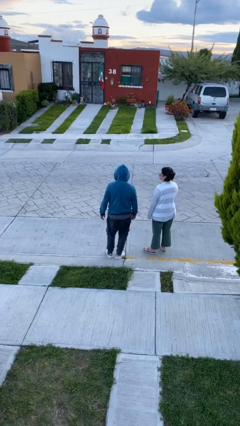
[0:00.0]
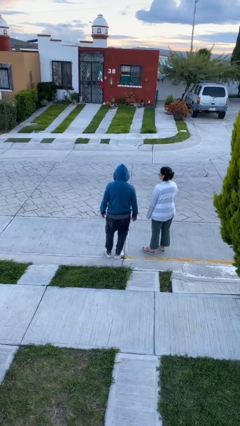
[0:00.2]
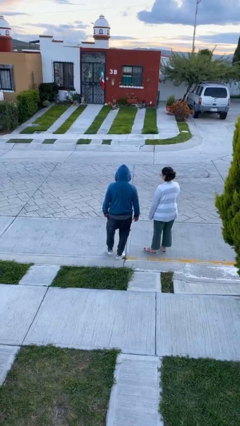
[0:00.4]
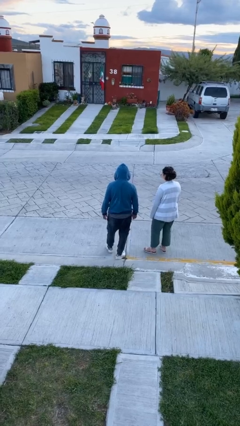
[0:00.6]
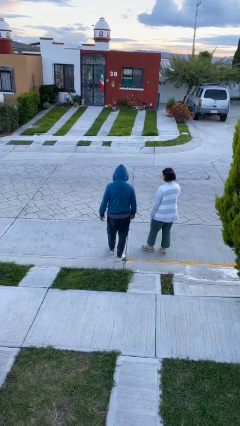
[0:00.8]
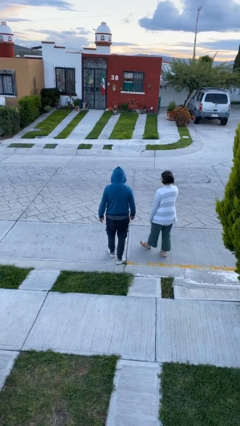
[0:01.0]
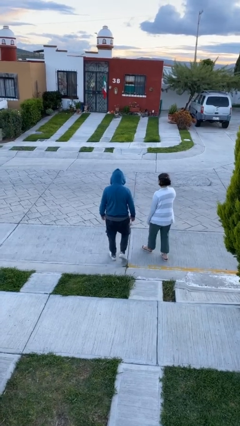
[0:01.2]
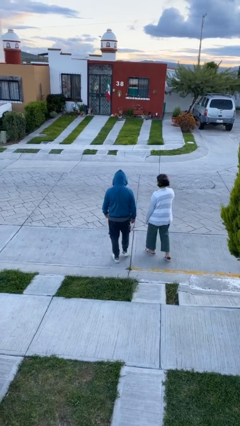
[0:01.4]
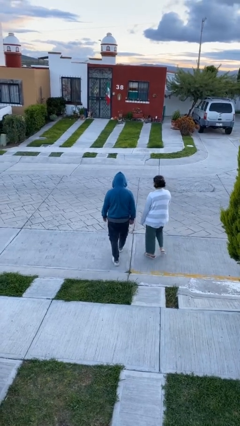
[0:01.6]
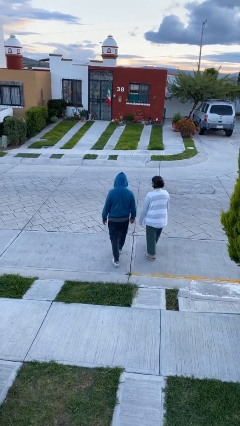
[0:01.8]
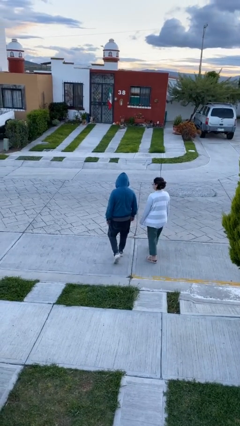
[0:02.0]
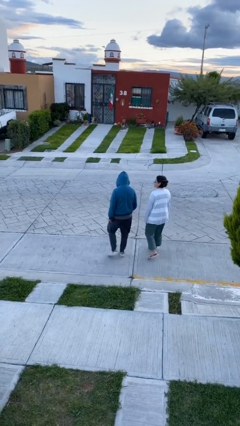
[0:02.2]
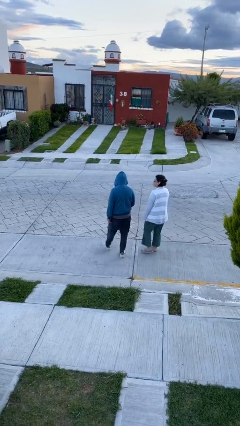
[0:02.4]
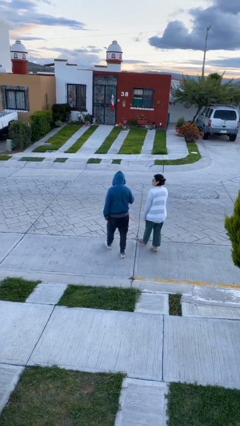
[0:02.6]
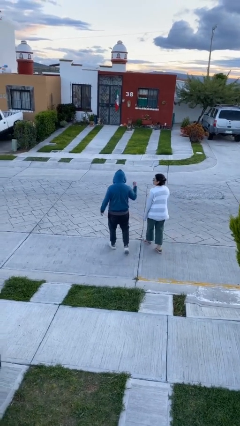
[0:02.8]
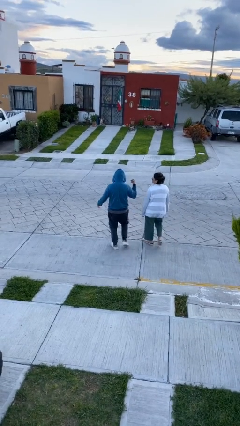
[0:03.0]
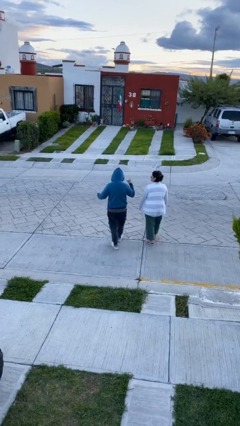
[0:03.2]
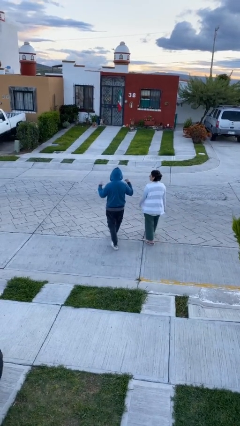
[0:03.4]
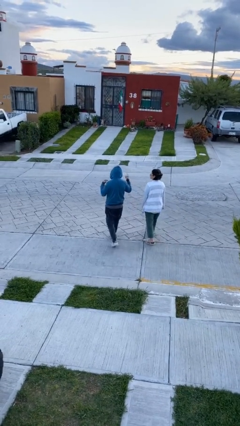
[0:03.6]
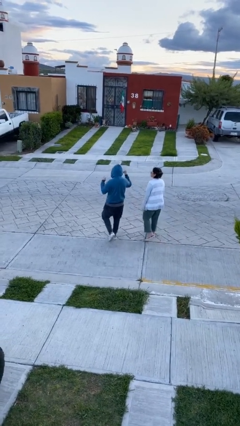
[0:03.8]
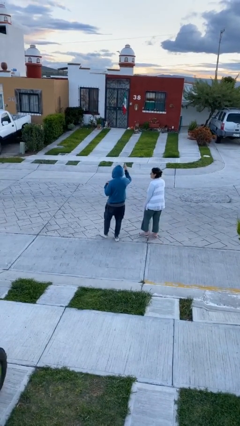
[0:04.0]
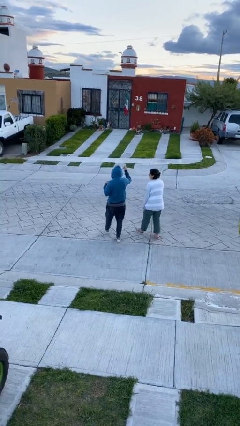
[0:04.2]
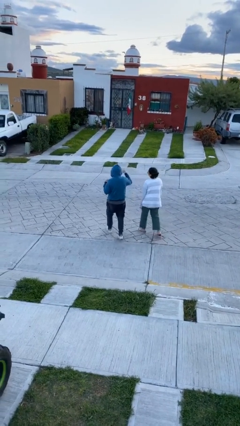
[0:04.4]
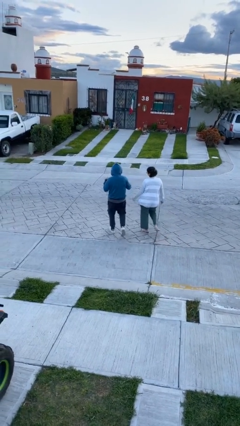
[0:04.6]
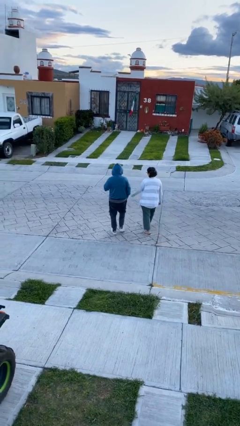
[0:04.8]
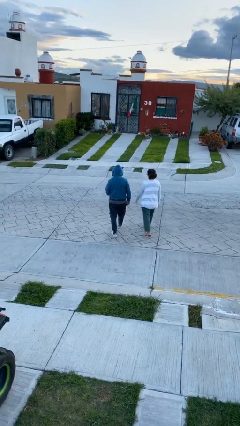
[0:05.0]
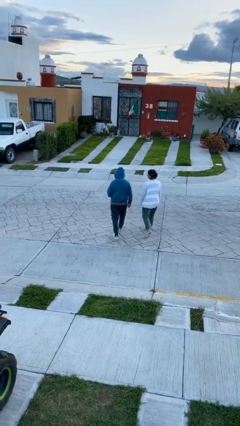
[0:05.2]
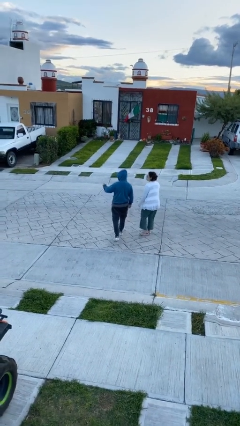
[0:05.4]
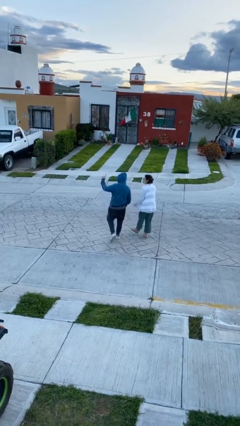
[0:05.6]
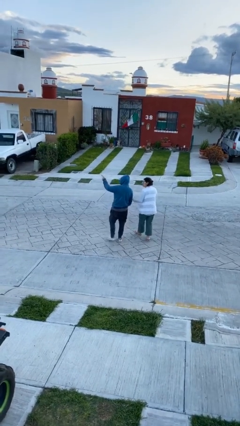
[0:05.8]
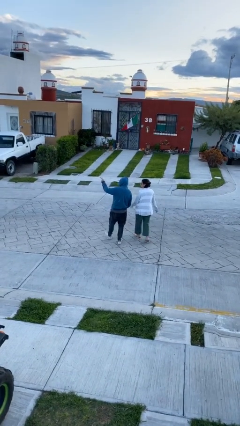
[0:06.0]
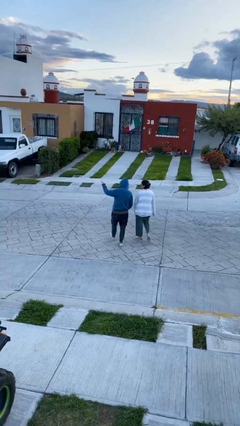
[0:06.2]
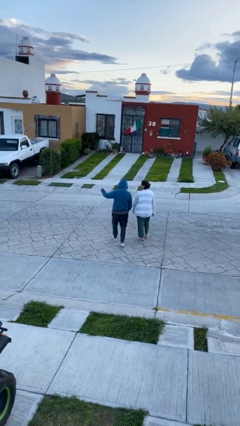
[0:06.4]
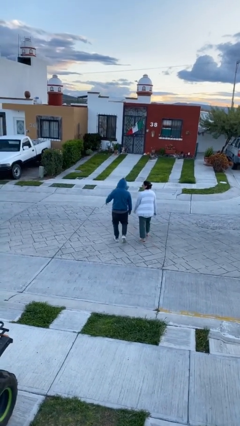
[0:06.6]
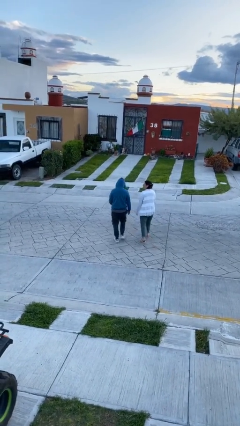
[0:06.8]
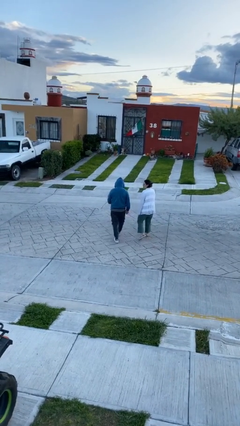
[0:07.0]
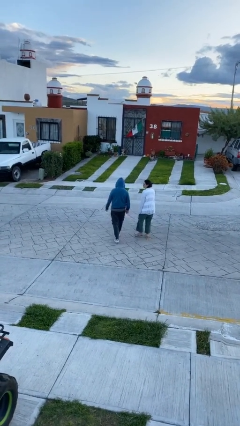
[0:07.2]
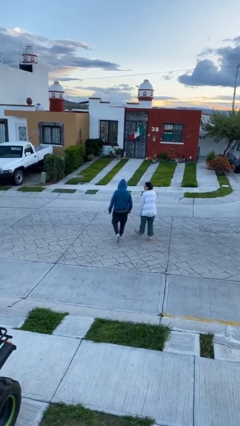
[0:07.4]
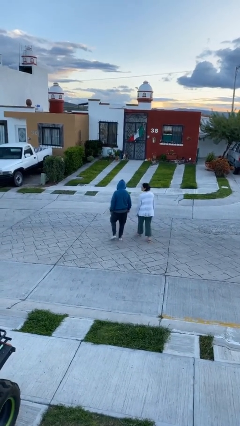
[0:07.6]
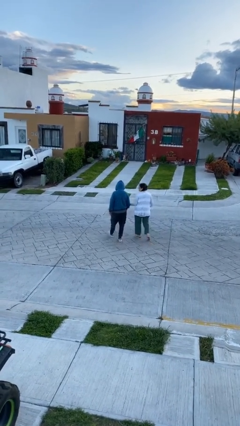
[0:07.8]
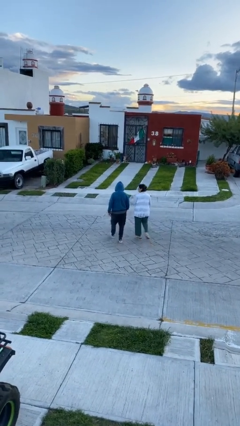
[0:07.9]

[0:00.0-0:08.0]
person talks to person

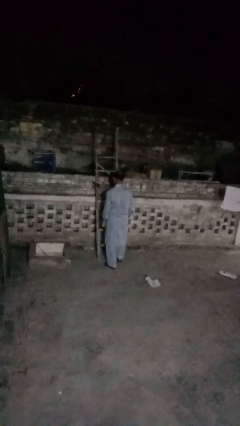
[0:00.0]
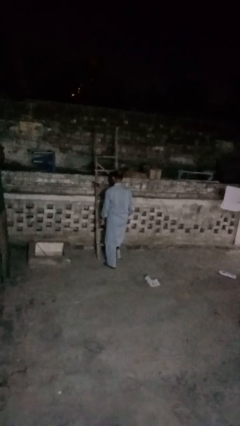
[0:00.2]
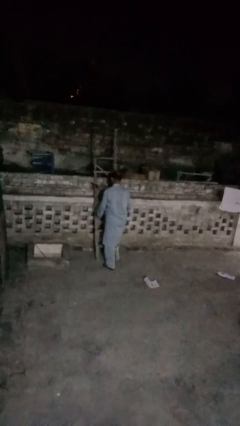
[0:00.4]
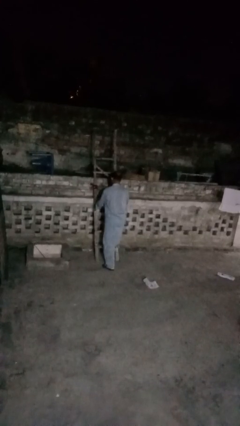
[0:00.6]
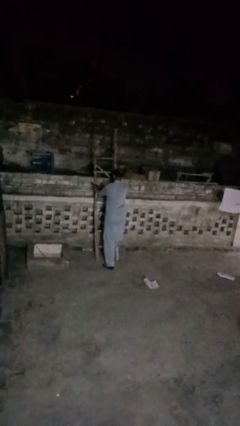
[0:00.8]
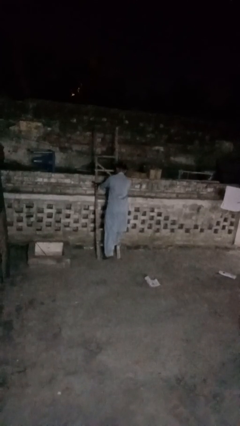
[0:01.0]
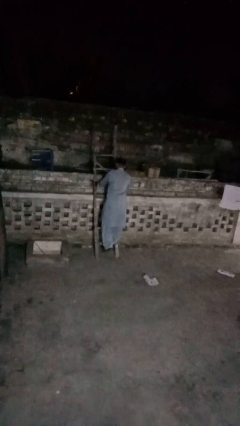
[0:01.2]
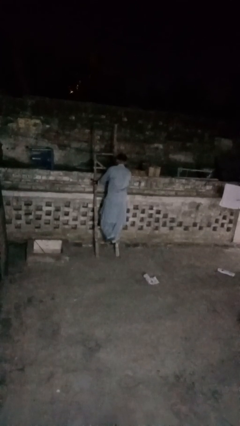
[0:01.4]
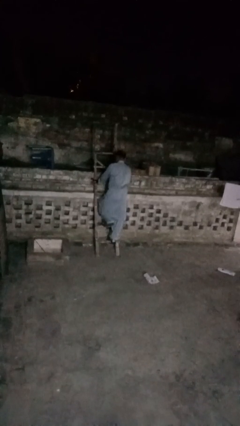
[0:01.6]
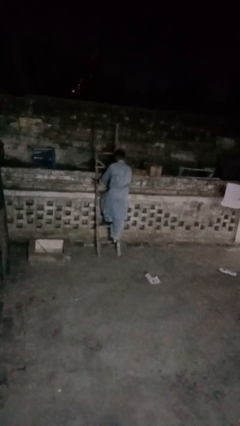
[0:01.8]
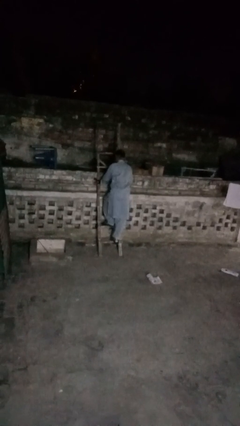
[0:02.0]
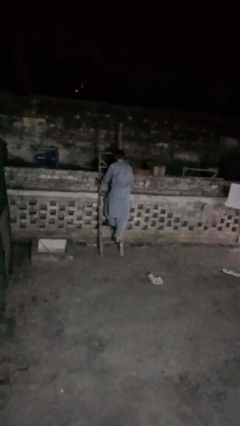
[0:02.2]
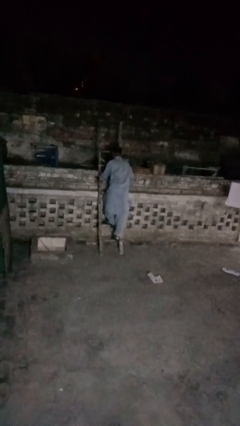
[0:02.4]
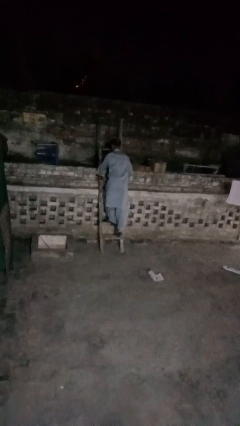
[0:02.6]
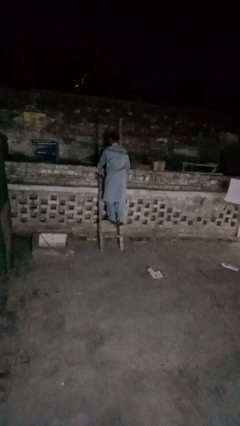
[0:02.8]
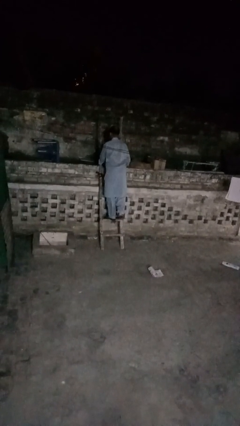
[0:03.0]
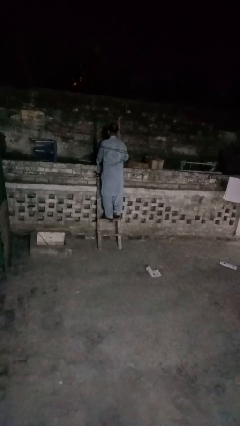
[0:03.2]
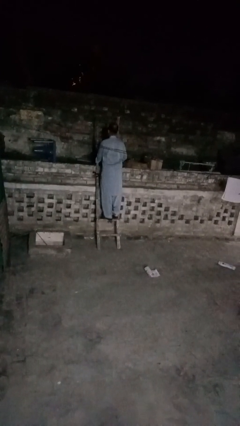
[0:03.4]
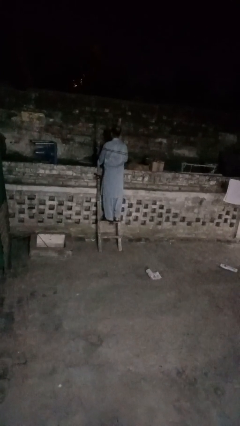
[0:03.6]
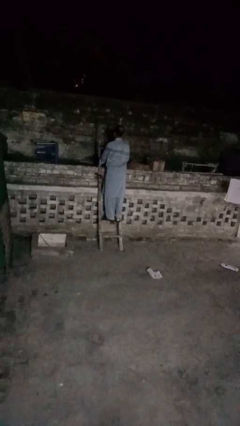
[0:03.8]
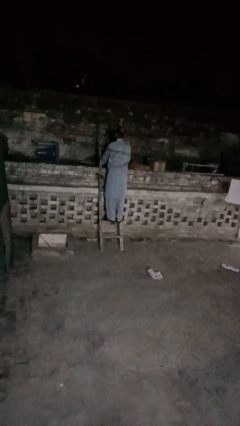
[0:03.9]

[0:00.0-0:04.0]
person climbs up ladder

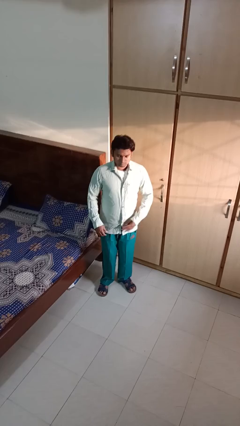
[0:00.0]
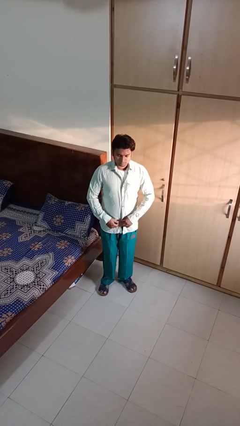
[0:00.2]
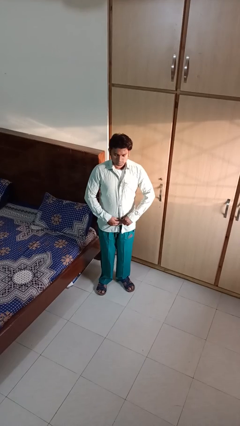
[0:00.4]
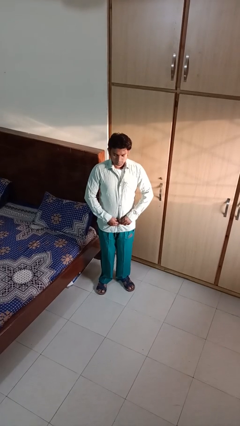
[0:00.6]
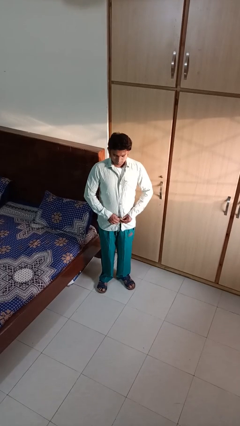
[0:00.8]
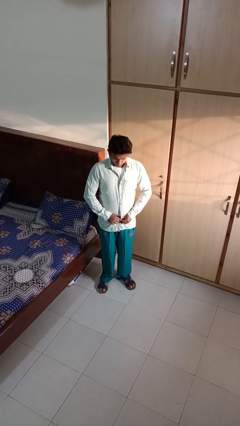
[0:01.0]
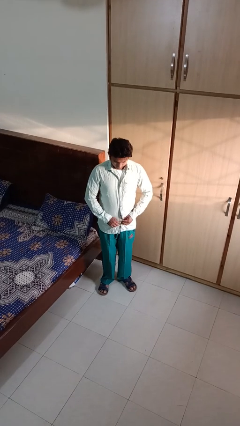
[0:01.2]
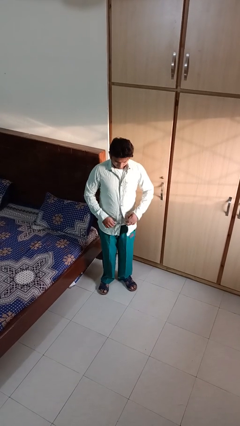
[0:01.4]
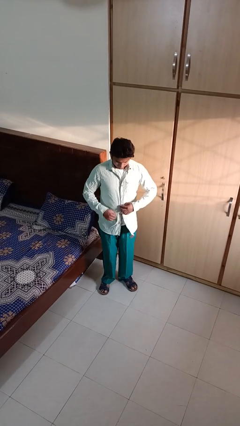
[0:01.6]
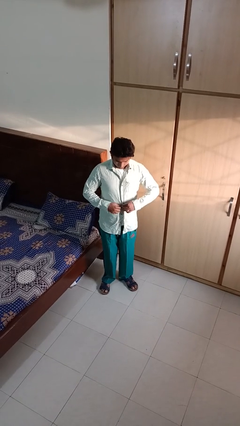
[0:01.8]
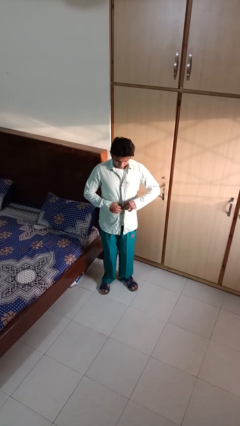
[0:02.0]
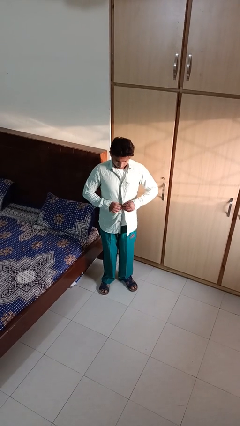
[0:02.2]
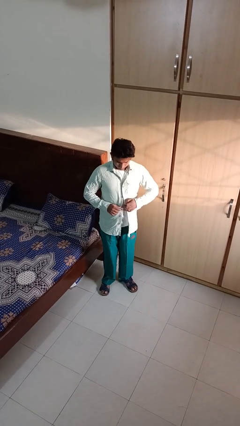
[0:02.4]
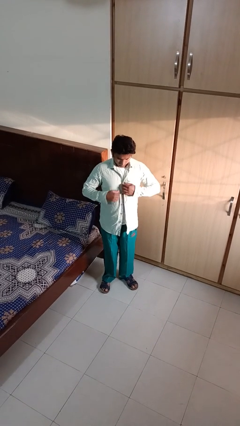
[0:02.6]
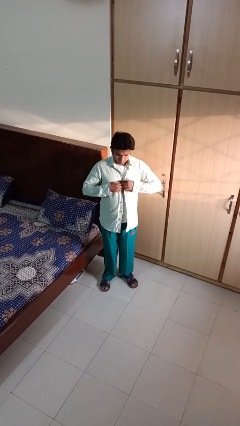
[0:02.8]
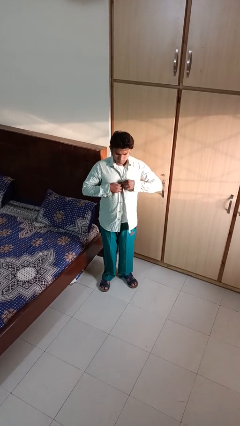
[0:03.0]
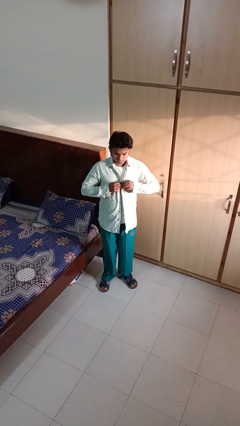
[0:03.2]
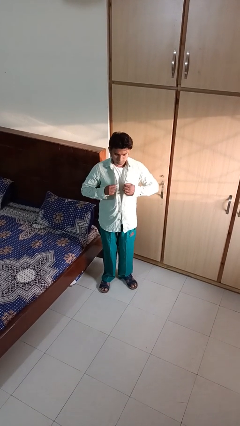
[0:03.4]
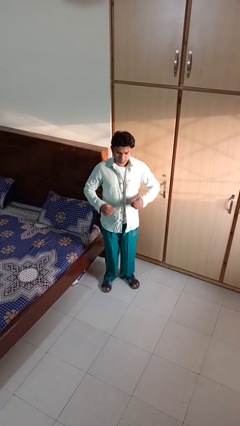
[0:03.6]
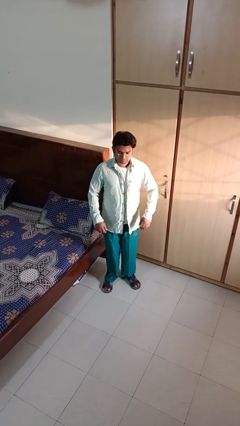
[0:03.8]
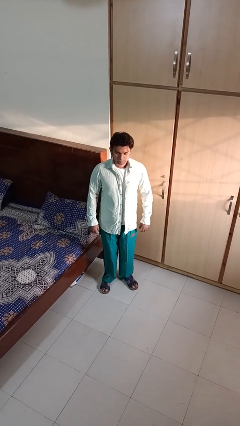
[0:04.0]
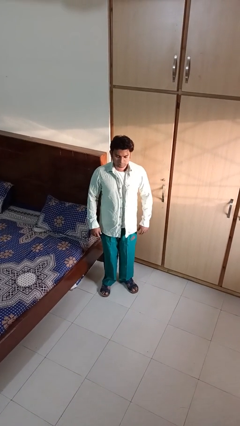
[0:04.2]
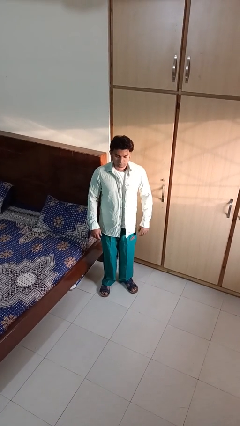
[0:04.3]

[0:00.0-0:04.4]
person unbuttons shirt

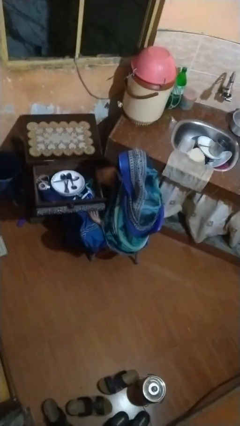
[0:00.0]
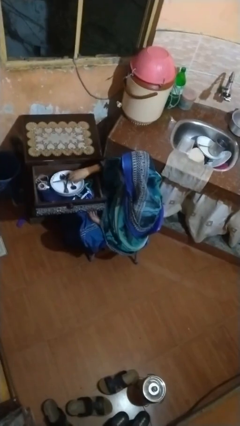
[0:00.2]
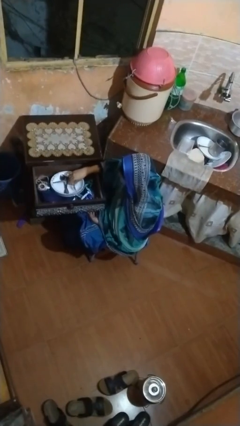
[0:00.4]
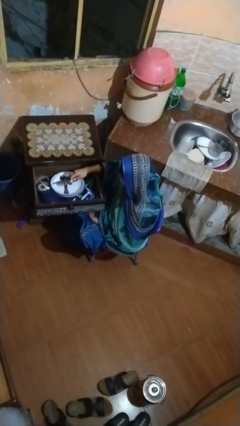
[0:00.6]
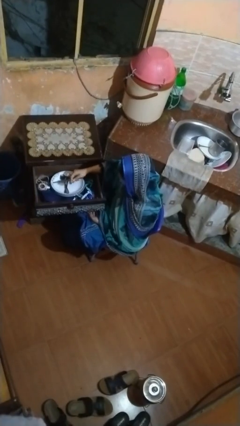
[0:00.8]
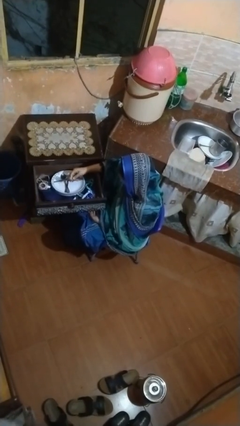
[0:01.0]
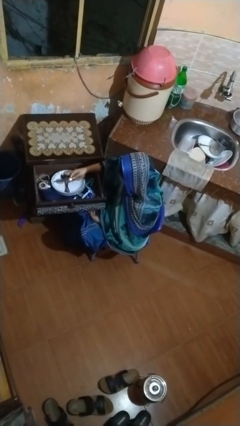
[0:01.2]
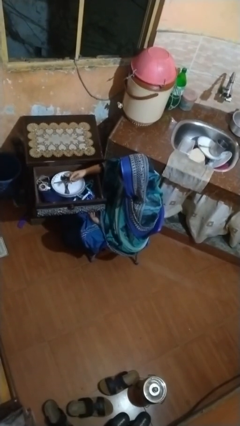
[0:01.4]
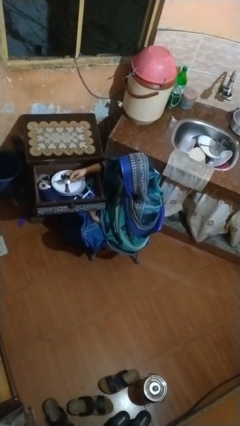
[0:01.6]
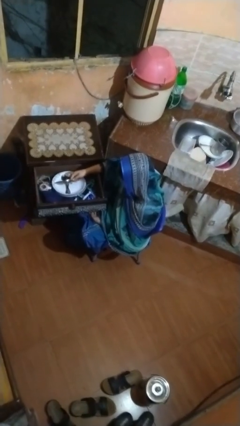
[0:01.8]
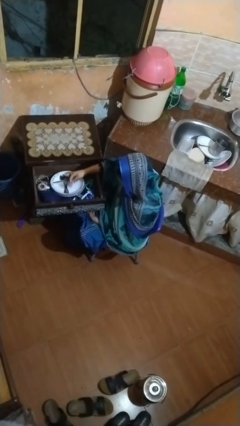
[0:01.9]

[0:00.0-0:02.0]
person takes object from kitchen drawer
